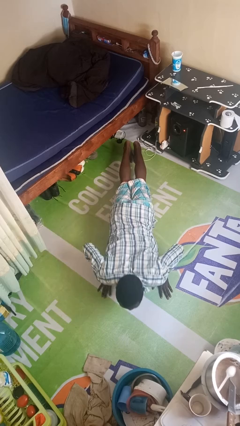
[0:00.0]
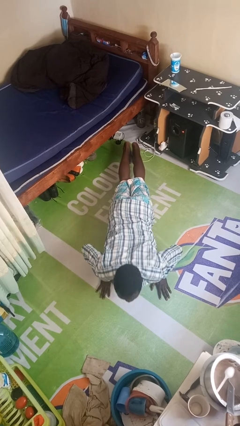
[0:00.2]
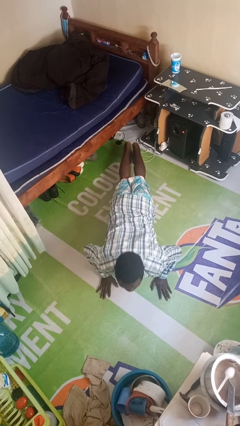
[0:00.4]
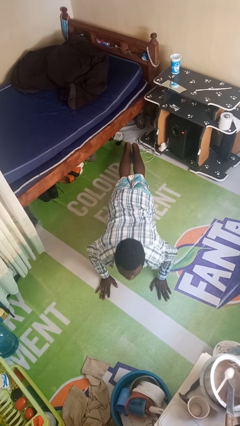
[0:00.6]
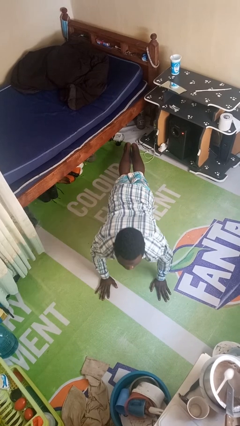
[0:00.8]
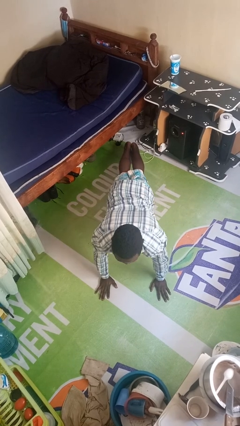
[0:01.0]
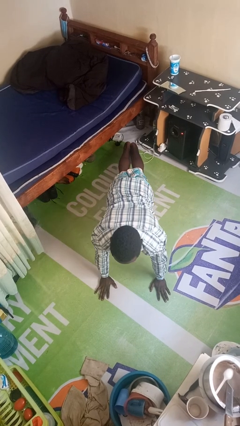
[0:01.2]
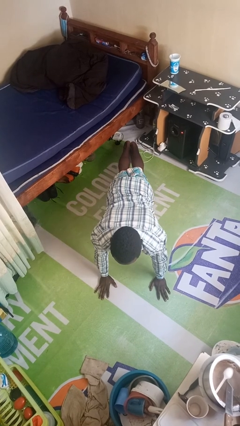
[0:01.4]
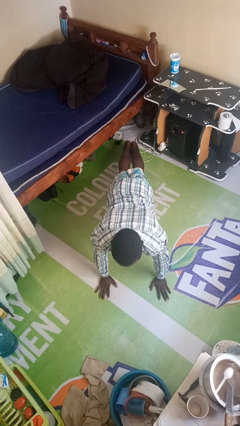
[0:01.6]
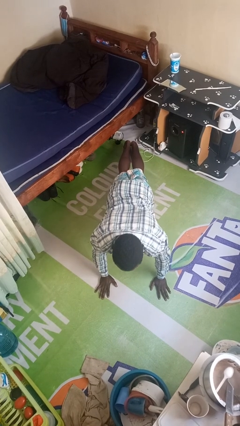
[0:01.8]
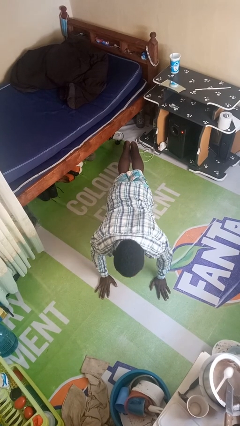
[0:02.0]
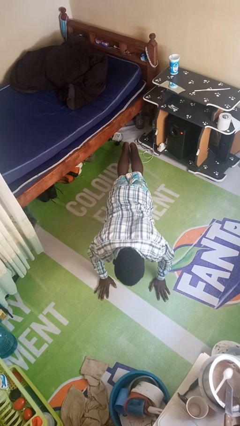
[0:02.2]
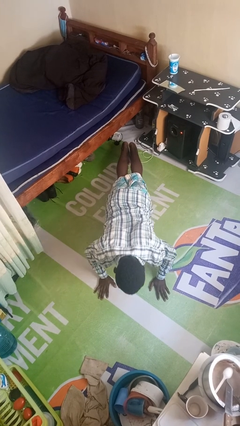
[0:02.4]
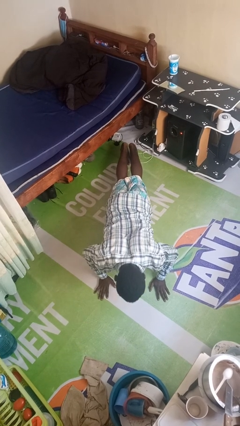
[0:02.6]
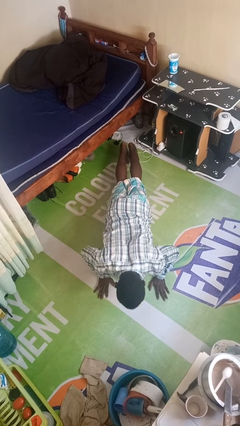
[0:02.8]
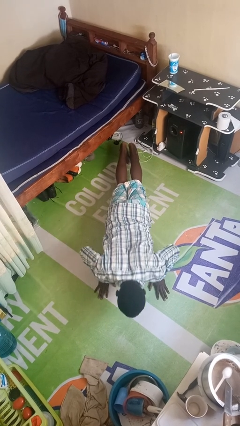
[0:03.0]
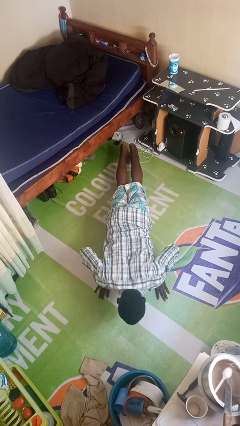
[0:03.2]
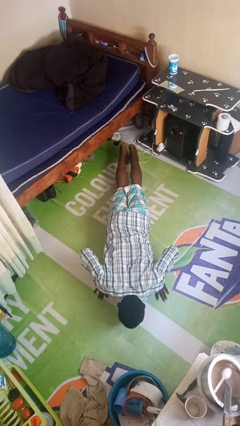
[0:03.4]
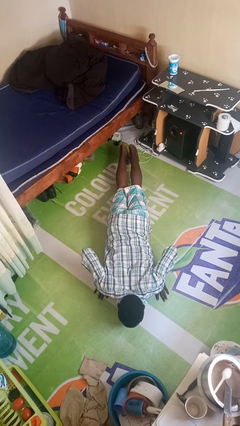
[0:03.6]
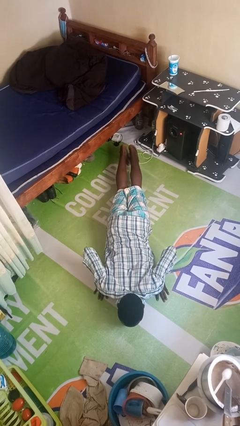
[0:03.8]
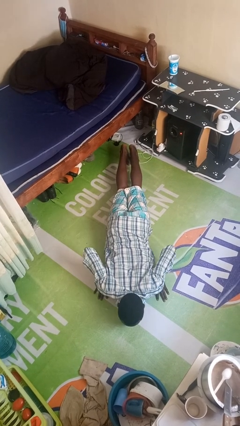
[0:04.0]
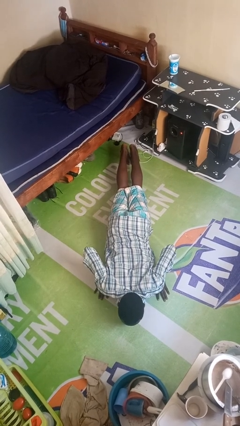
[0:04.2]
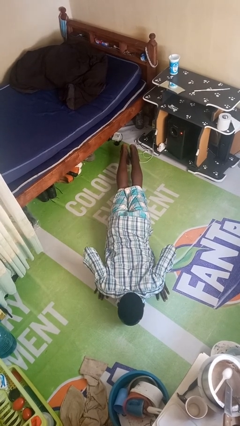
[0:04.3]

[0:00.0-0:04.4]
person exercises with pushup

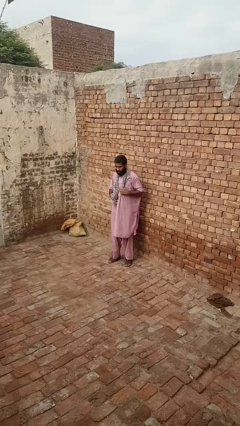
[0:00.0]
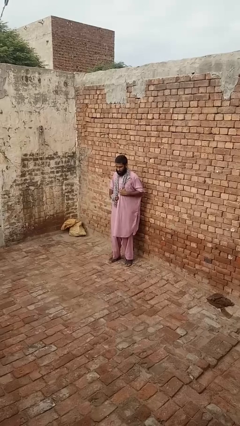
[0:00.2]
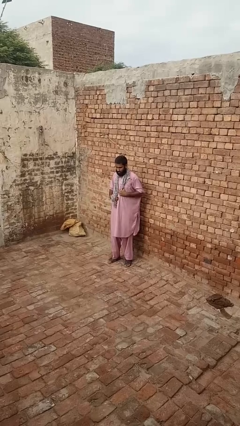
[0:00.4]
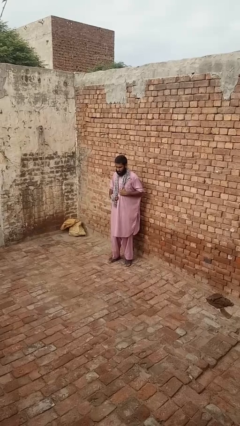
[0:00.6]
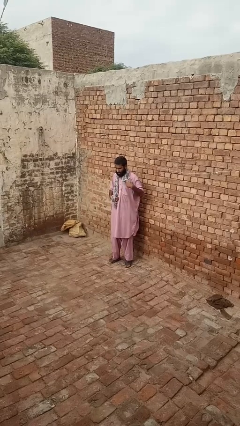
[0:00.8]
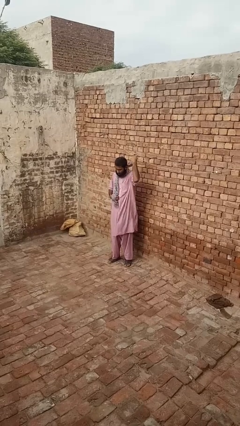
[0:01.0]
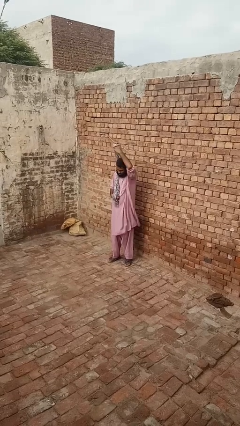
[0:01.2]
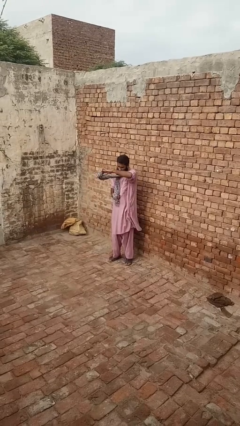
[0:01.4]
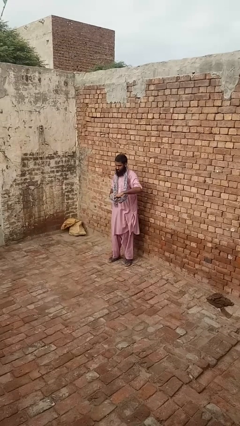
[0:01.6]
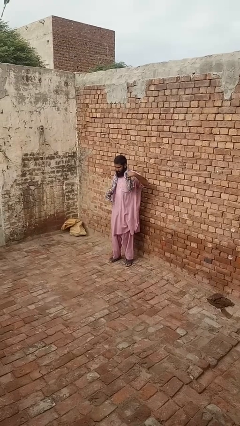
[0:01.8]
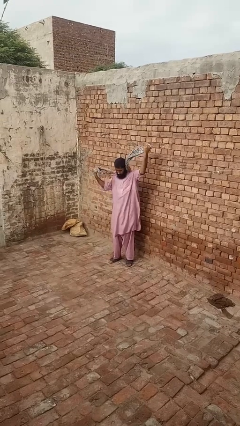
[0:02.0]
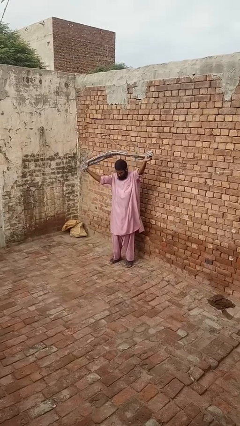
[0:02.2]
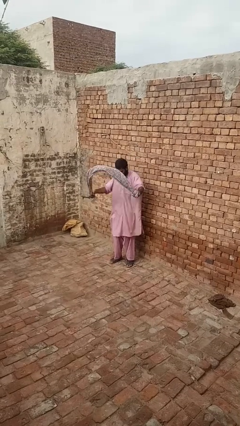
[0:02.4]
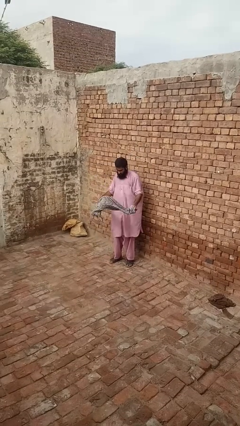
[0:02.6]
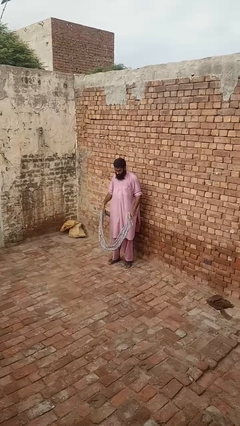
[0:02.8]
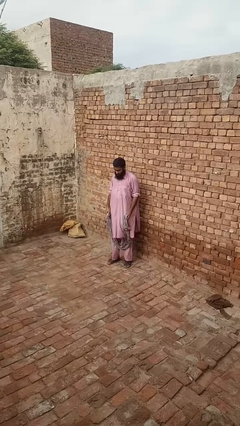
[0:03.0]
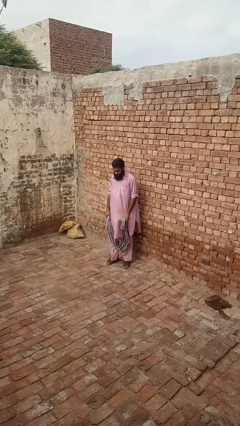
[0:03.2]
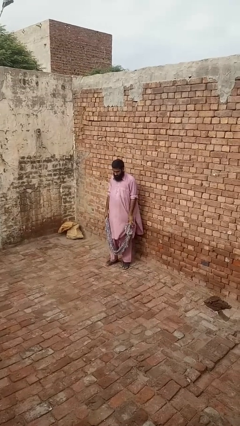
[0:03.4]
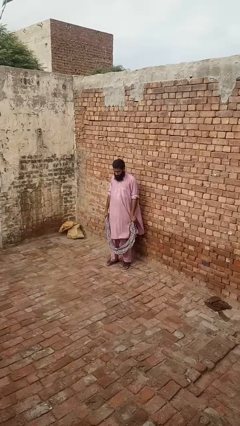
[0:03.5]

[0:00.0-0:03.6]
person takes off scarf

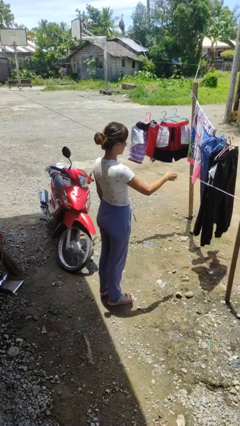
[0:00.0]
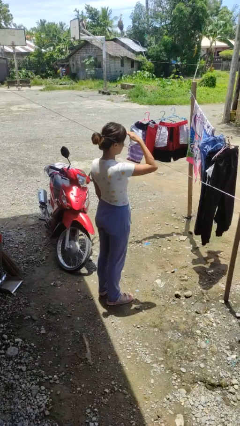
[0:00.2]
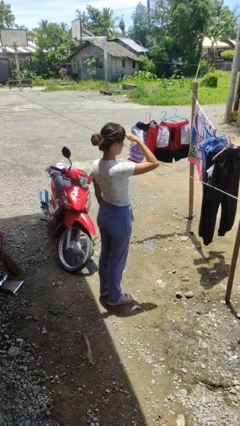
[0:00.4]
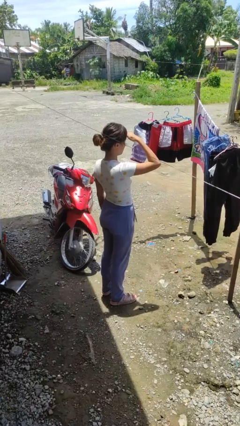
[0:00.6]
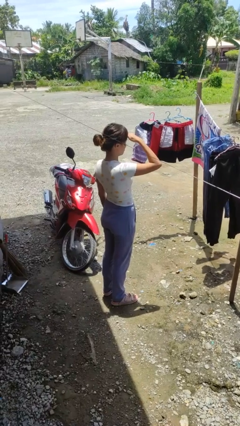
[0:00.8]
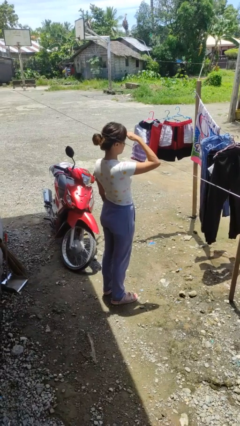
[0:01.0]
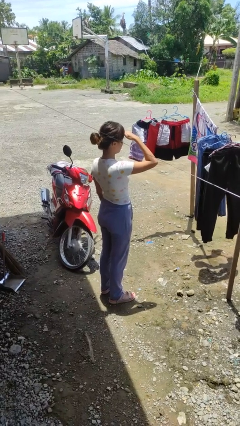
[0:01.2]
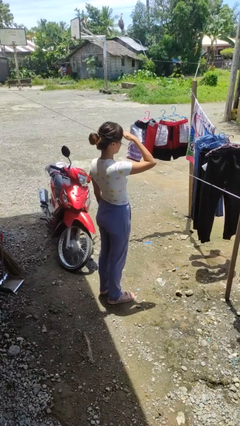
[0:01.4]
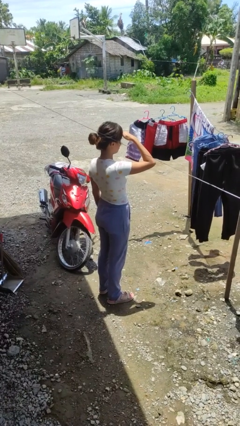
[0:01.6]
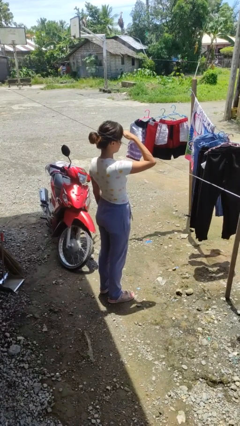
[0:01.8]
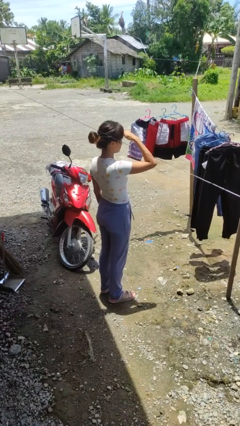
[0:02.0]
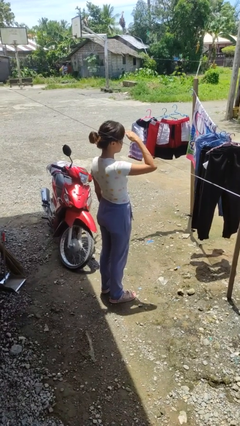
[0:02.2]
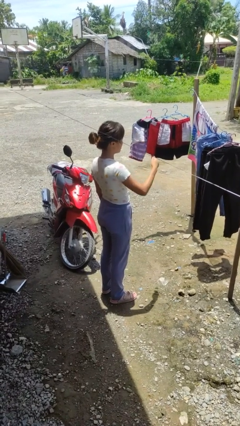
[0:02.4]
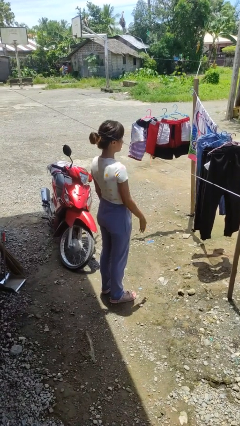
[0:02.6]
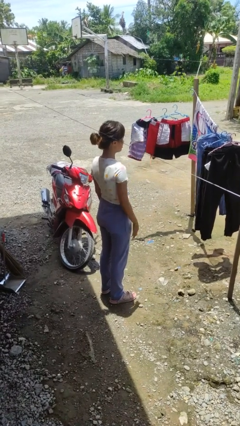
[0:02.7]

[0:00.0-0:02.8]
person shades eyes

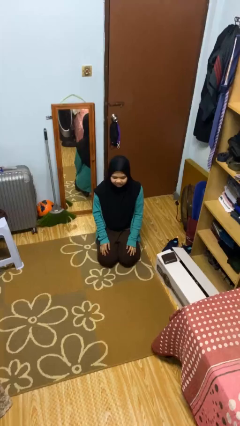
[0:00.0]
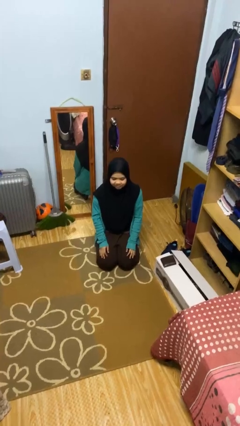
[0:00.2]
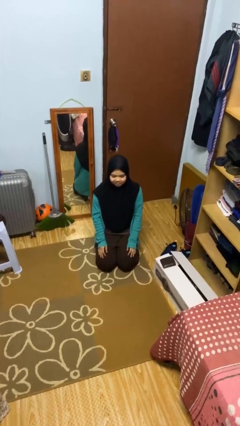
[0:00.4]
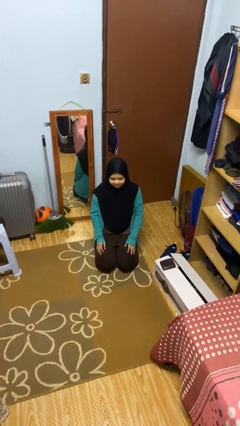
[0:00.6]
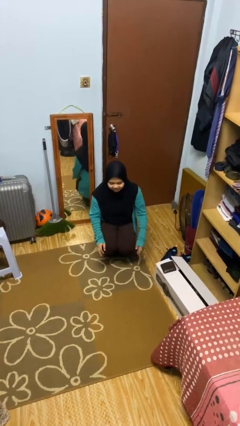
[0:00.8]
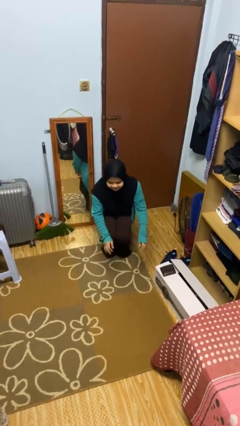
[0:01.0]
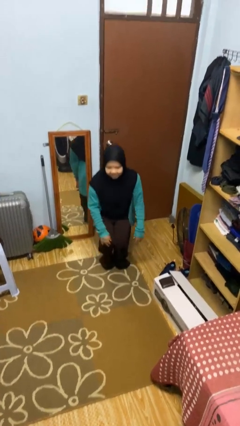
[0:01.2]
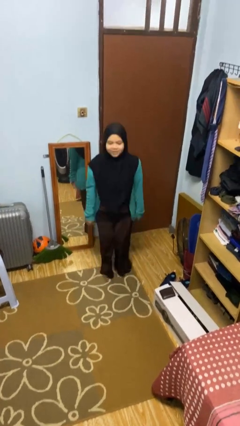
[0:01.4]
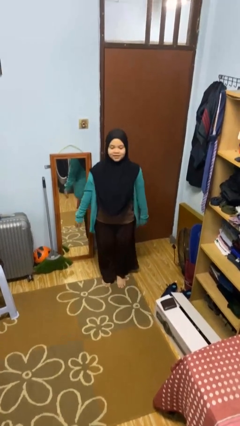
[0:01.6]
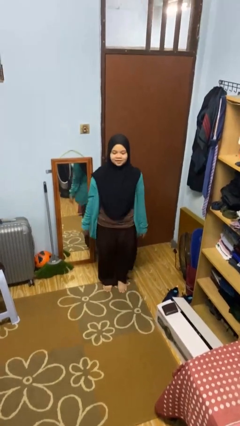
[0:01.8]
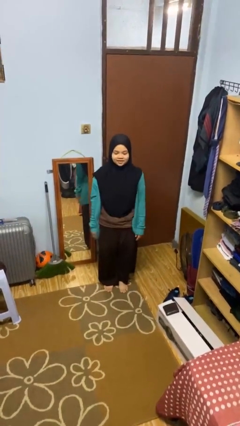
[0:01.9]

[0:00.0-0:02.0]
person stands up from floor

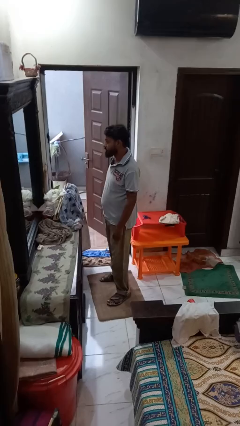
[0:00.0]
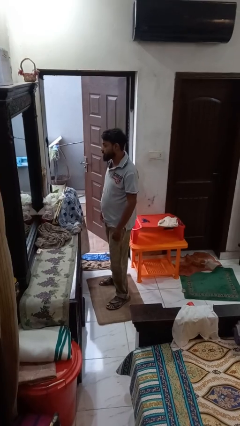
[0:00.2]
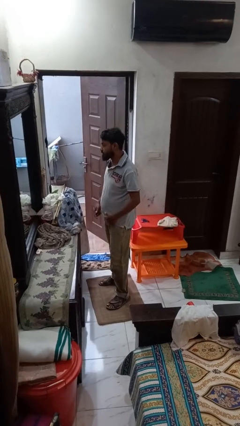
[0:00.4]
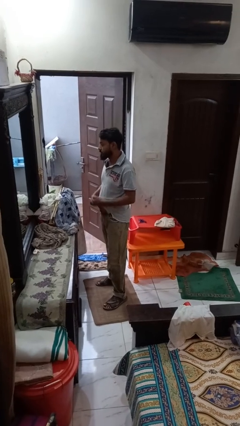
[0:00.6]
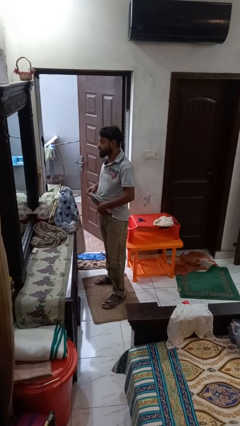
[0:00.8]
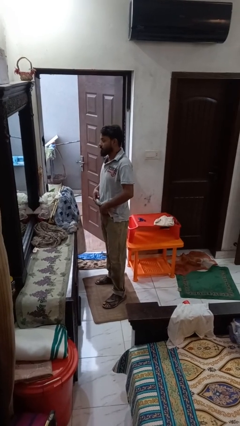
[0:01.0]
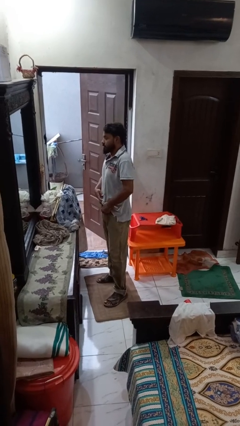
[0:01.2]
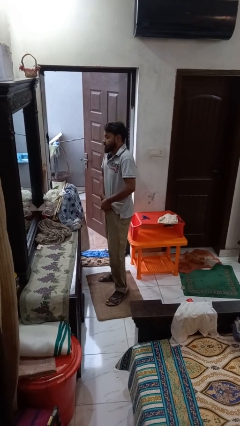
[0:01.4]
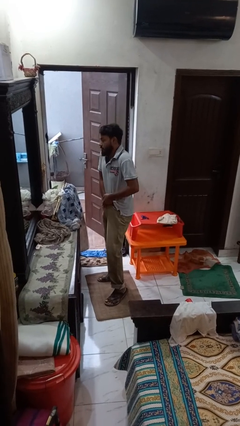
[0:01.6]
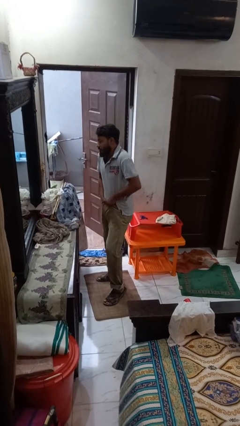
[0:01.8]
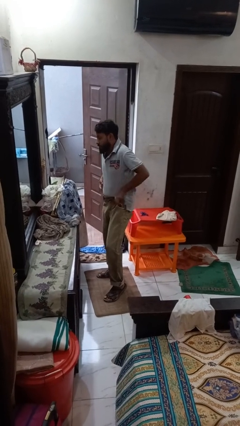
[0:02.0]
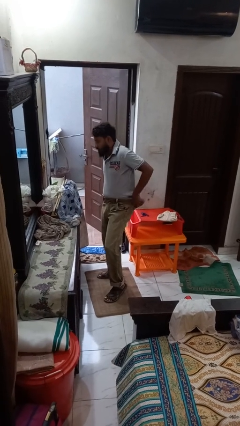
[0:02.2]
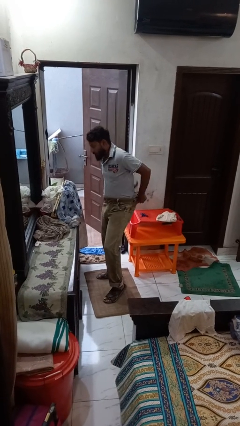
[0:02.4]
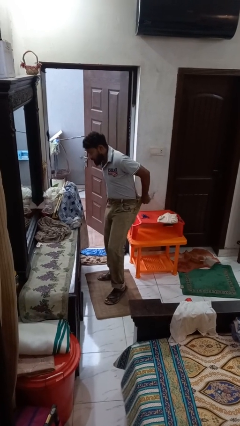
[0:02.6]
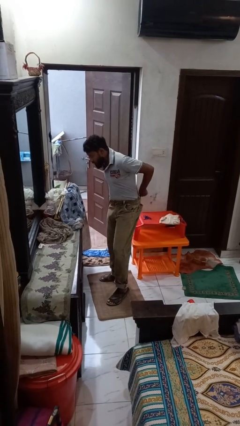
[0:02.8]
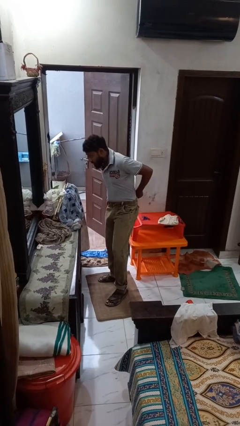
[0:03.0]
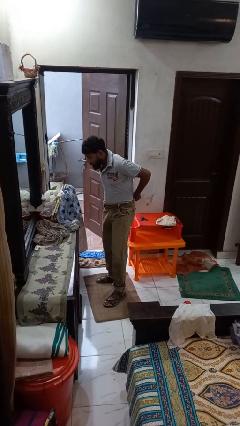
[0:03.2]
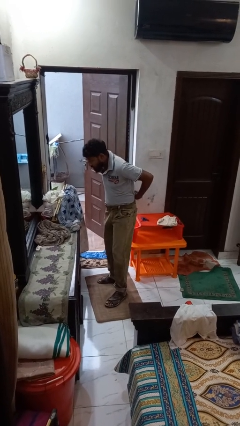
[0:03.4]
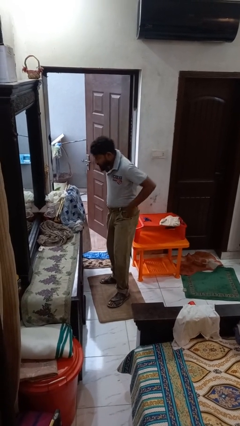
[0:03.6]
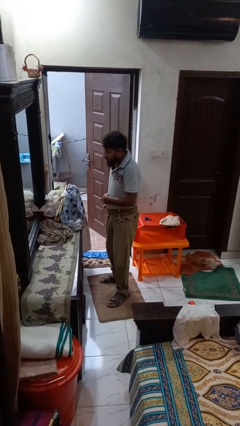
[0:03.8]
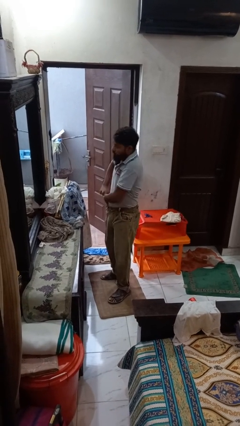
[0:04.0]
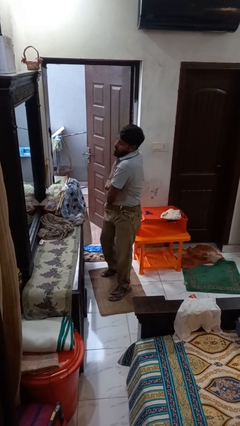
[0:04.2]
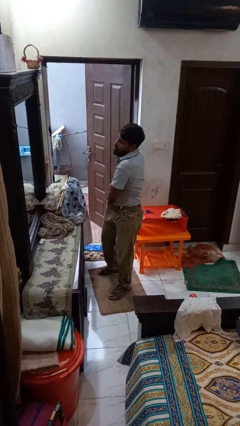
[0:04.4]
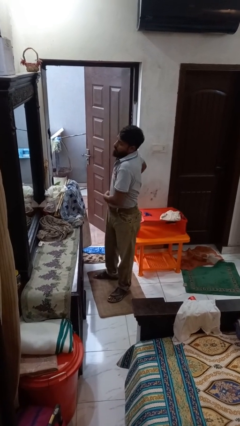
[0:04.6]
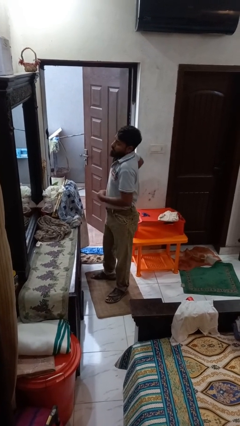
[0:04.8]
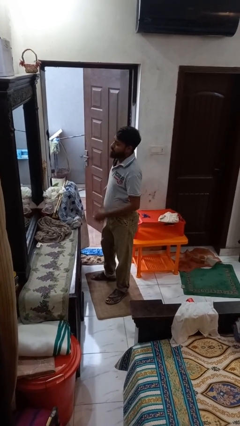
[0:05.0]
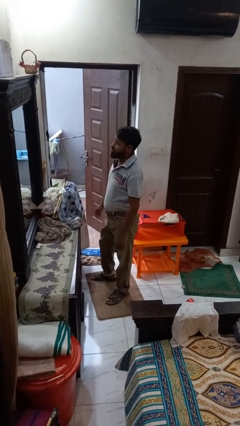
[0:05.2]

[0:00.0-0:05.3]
person tucks in shirt
